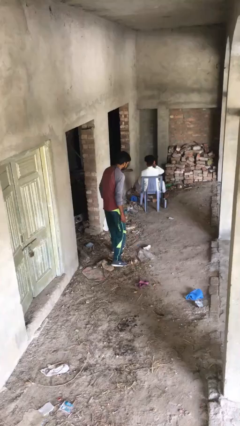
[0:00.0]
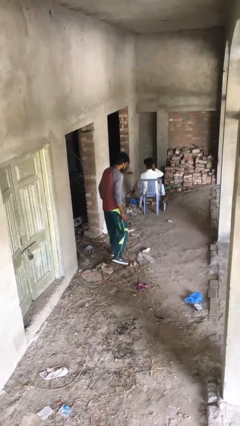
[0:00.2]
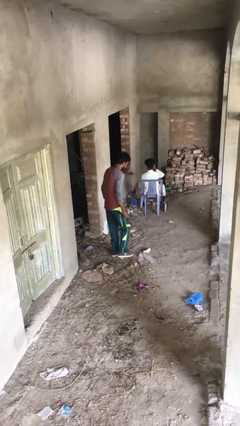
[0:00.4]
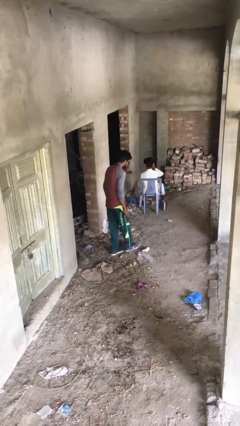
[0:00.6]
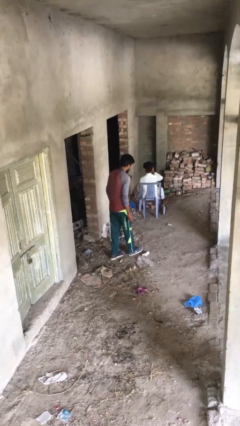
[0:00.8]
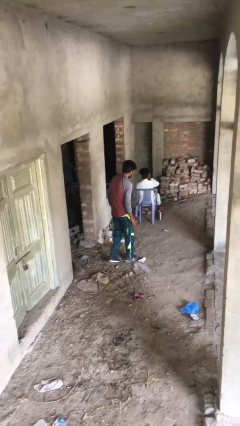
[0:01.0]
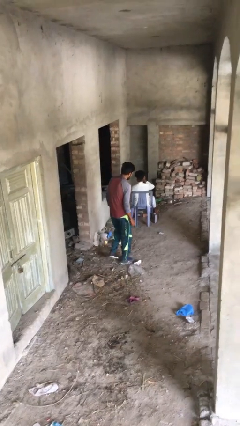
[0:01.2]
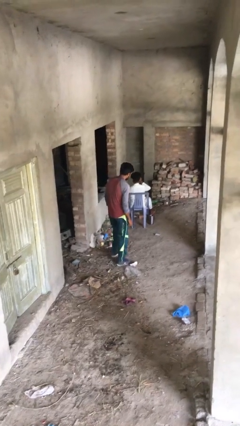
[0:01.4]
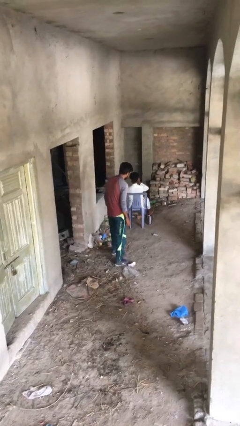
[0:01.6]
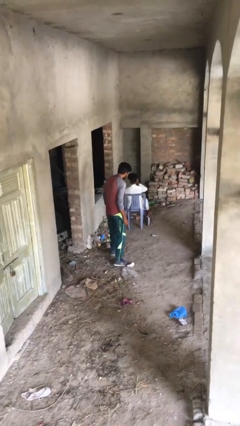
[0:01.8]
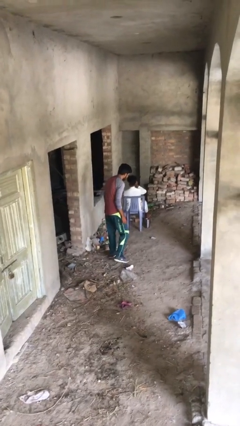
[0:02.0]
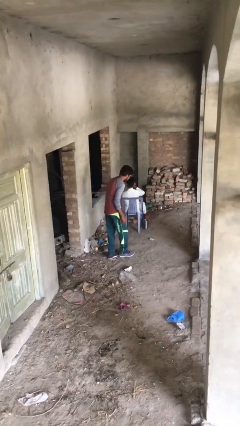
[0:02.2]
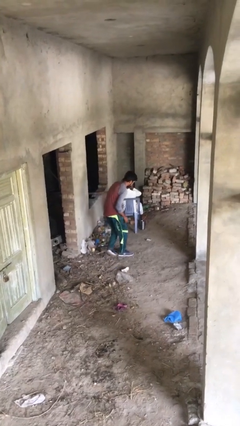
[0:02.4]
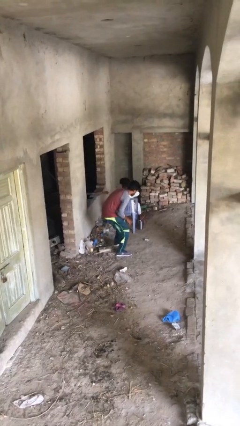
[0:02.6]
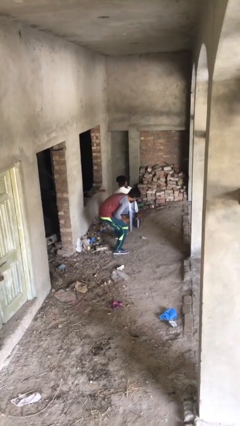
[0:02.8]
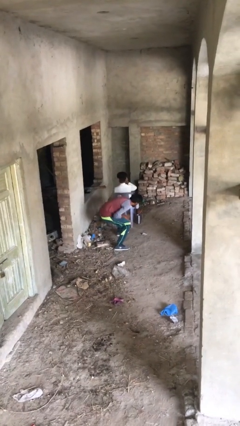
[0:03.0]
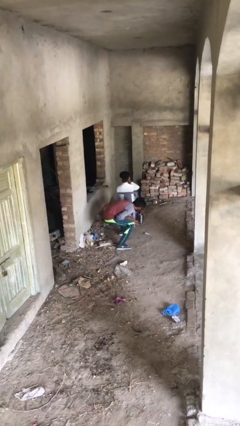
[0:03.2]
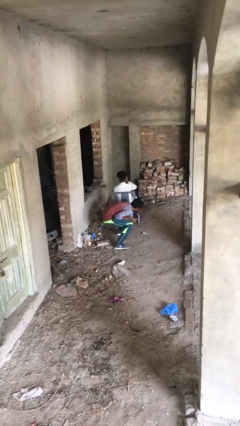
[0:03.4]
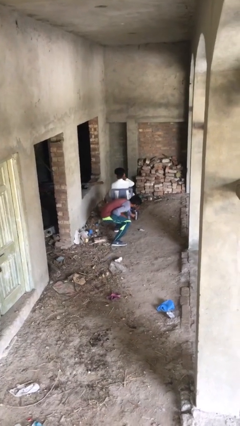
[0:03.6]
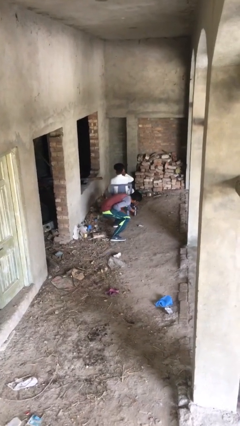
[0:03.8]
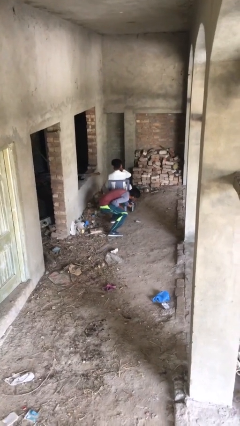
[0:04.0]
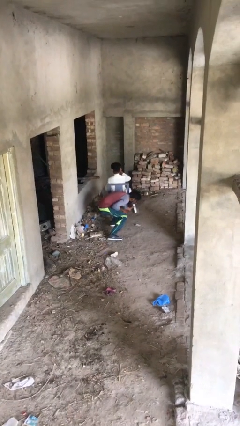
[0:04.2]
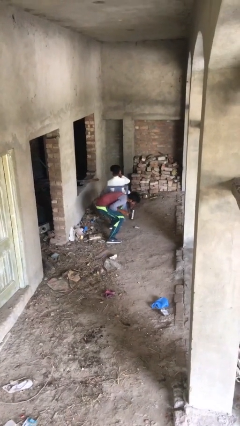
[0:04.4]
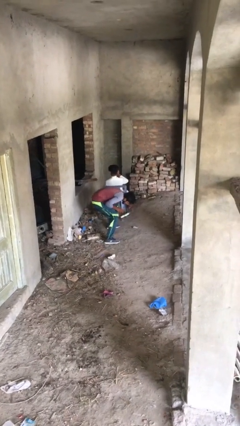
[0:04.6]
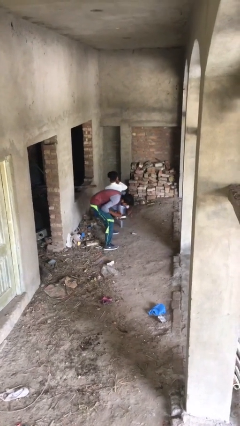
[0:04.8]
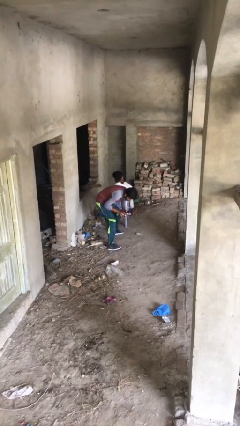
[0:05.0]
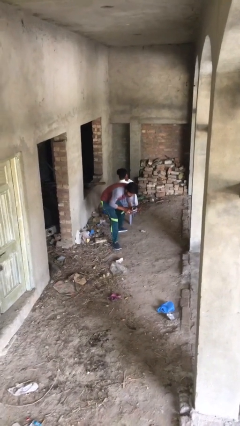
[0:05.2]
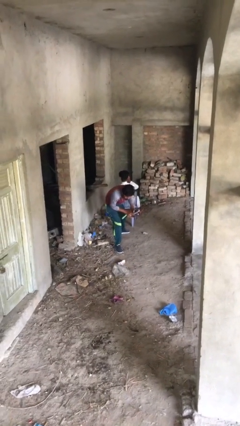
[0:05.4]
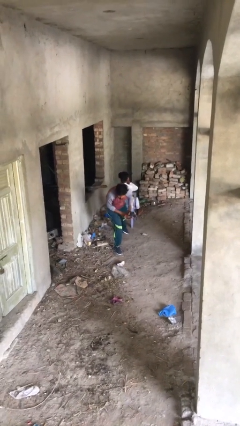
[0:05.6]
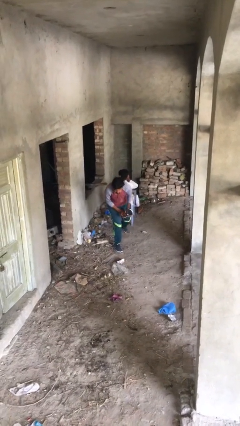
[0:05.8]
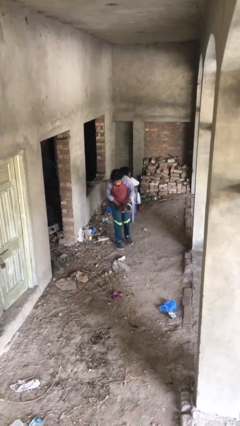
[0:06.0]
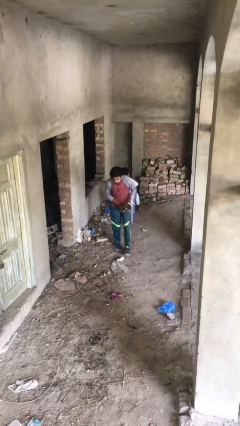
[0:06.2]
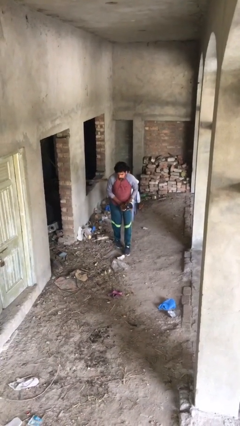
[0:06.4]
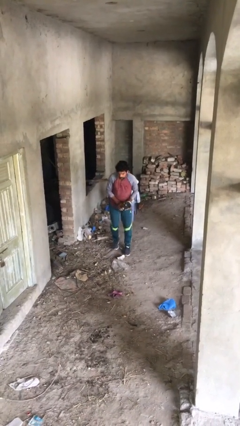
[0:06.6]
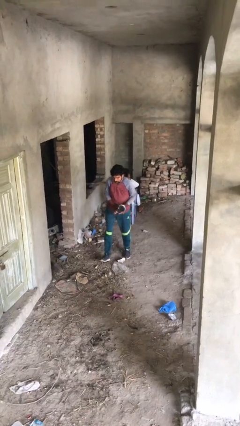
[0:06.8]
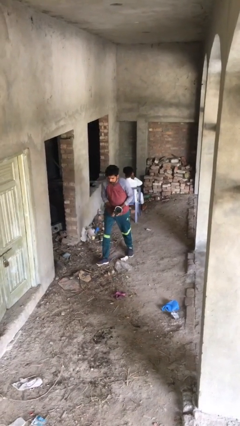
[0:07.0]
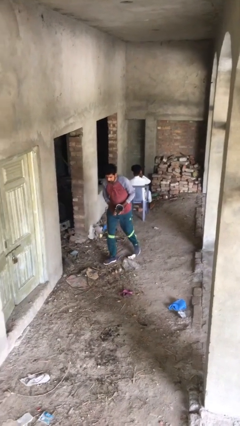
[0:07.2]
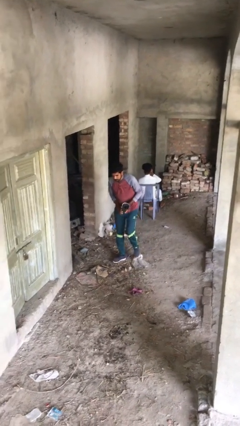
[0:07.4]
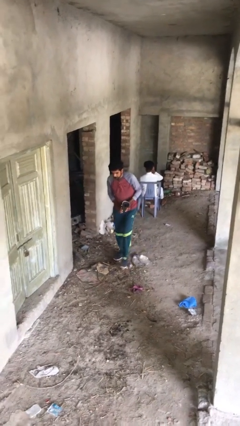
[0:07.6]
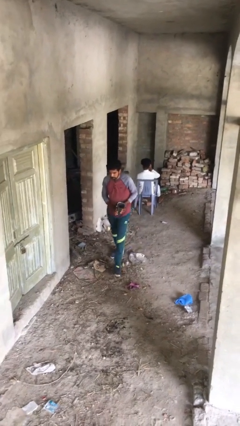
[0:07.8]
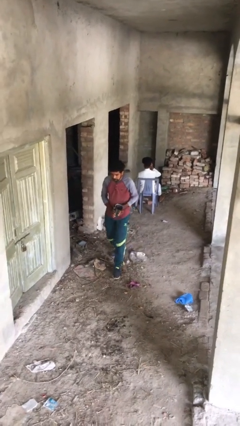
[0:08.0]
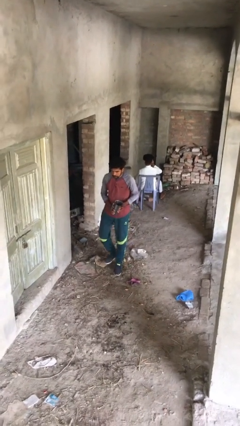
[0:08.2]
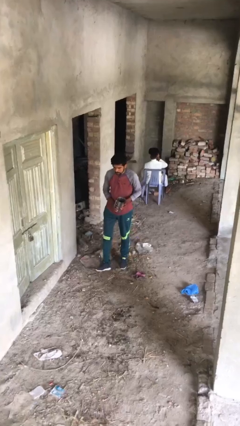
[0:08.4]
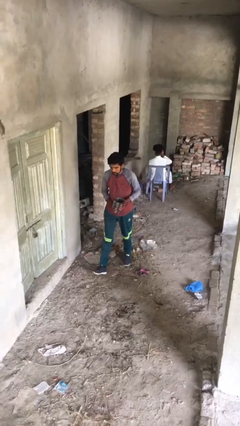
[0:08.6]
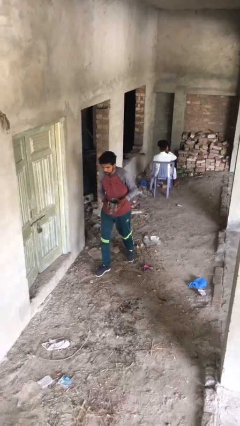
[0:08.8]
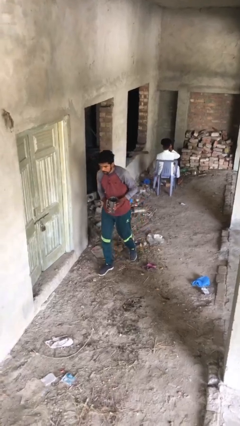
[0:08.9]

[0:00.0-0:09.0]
person steals object from person

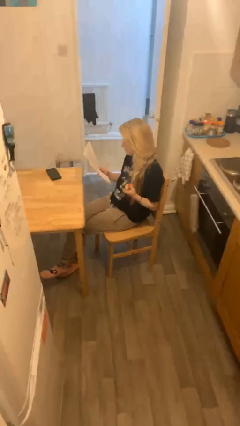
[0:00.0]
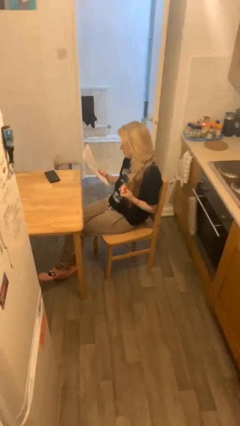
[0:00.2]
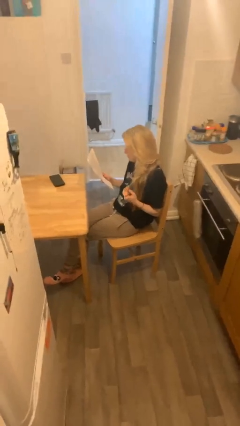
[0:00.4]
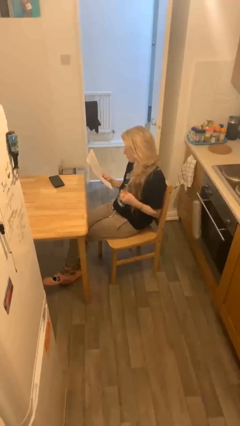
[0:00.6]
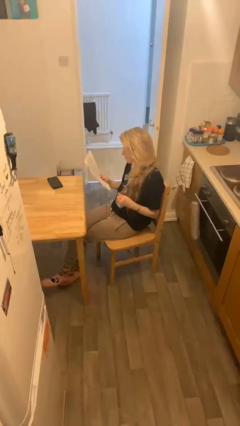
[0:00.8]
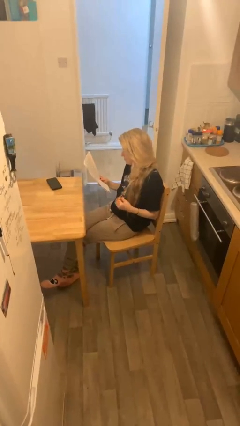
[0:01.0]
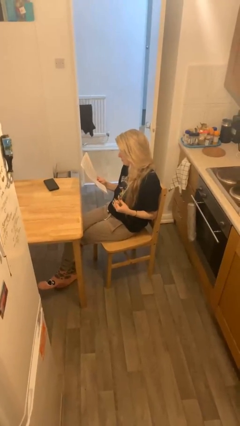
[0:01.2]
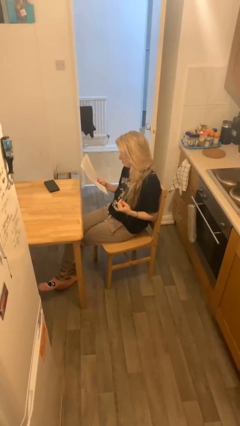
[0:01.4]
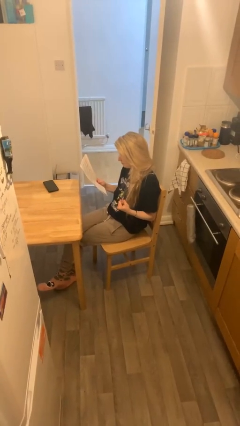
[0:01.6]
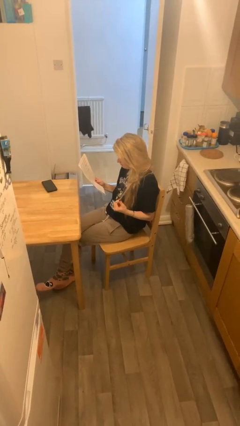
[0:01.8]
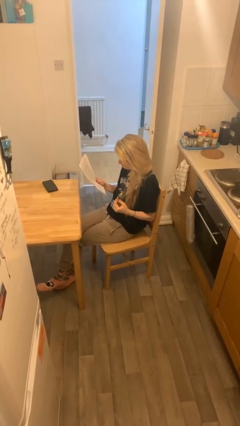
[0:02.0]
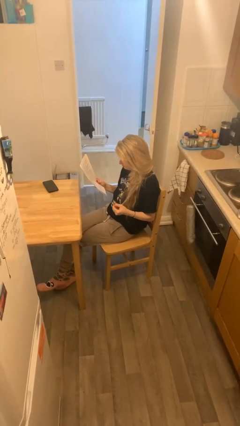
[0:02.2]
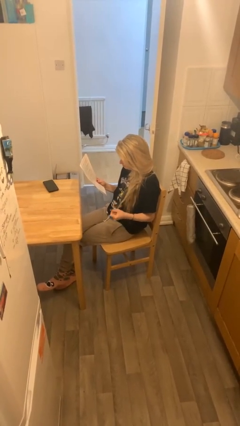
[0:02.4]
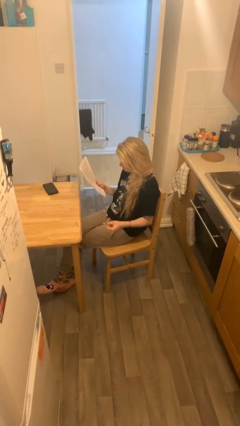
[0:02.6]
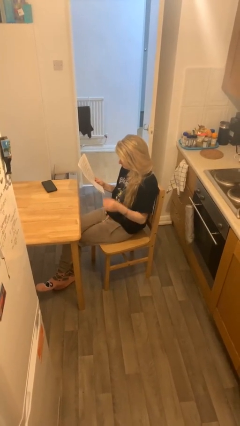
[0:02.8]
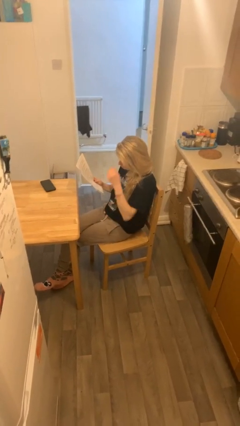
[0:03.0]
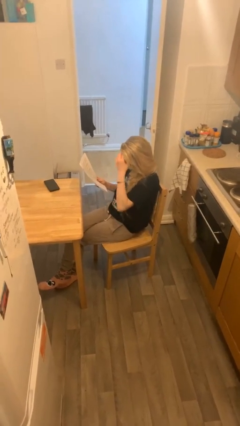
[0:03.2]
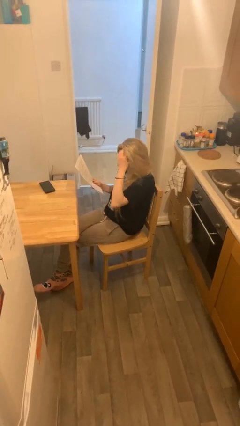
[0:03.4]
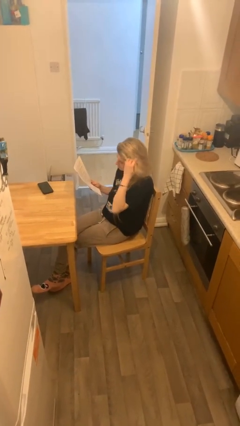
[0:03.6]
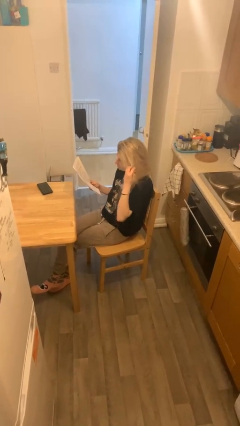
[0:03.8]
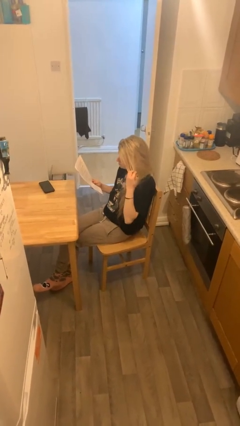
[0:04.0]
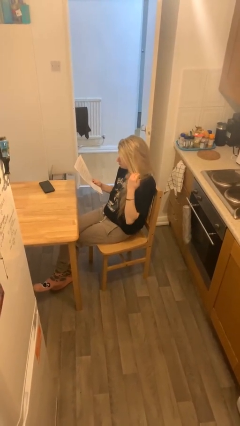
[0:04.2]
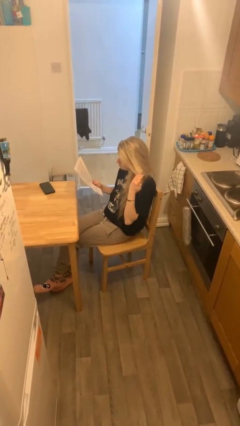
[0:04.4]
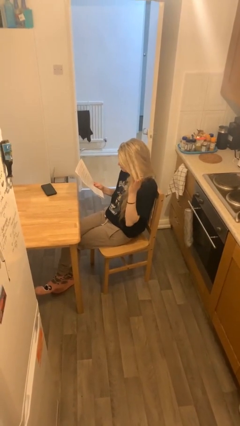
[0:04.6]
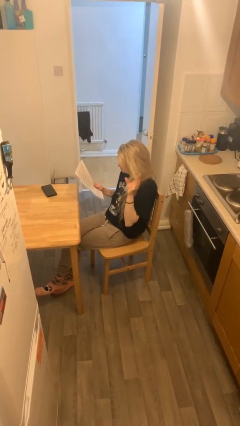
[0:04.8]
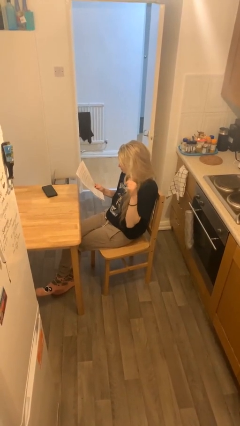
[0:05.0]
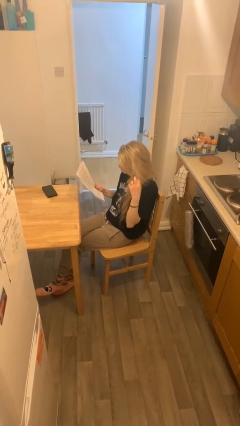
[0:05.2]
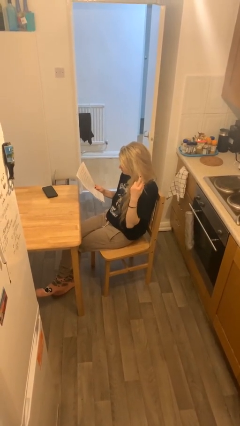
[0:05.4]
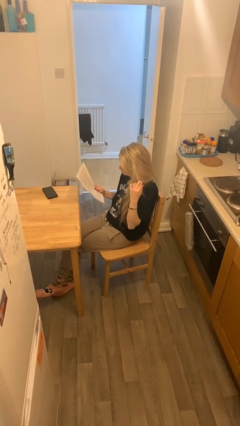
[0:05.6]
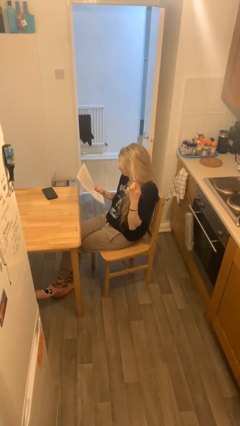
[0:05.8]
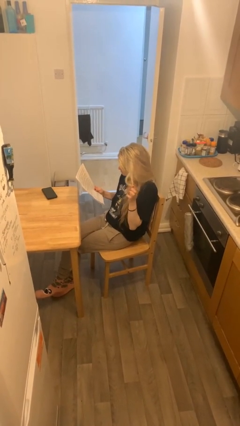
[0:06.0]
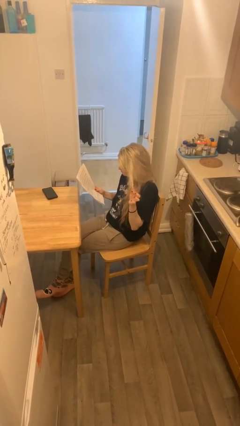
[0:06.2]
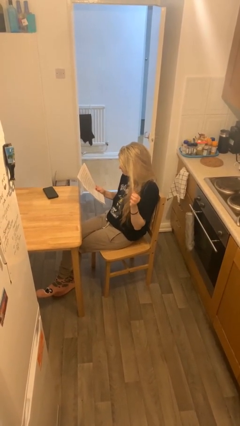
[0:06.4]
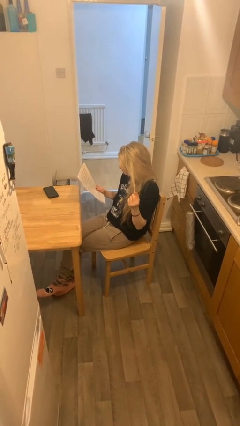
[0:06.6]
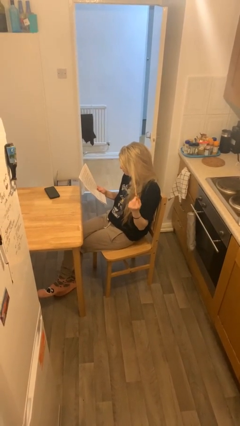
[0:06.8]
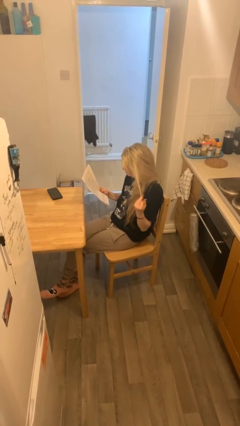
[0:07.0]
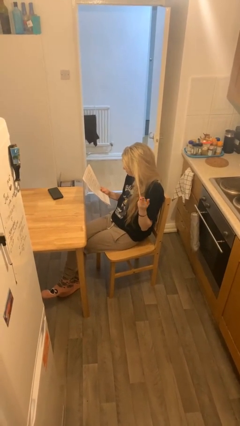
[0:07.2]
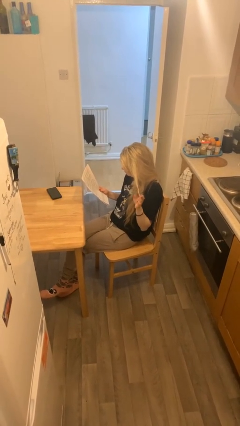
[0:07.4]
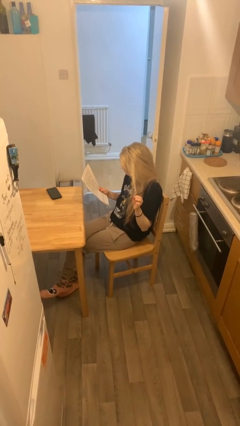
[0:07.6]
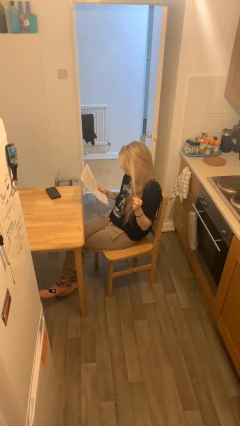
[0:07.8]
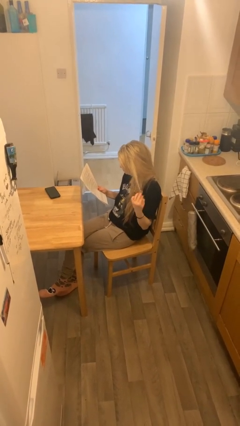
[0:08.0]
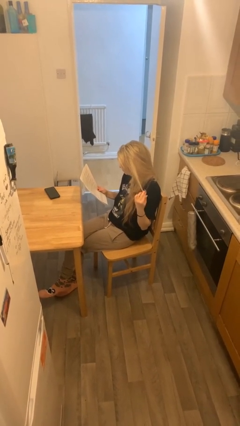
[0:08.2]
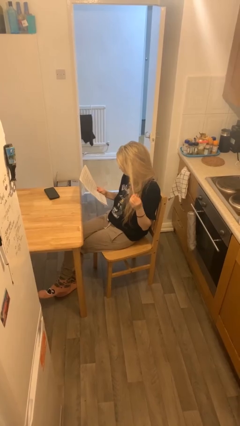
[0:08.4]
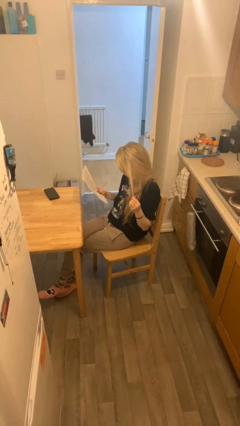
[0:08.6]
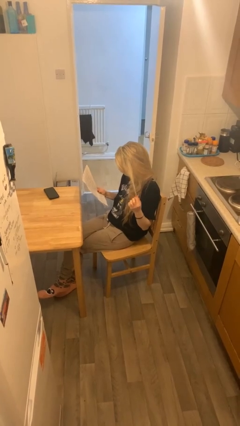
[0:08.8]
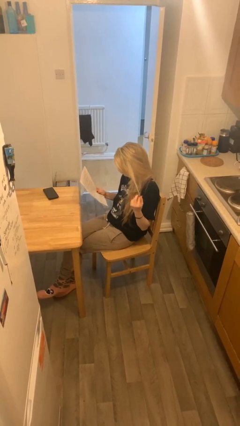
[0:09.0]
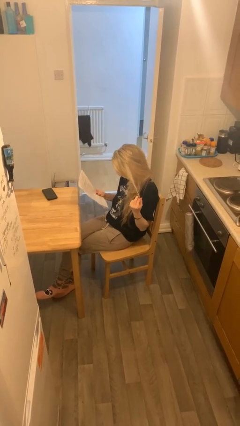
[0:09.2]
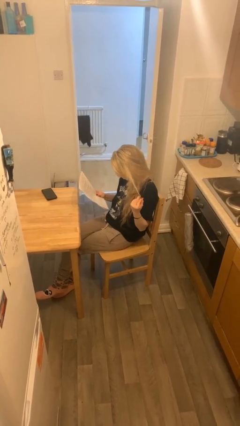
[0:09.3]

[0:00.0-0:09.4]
person reads document
